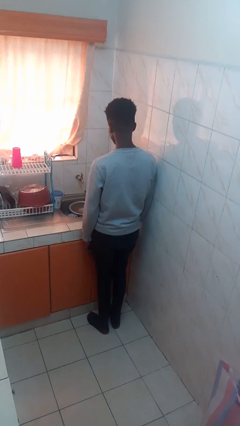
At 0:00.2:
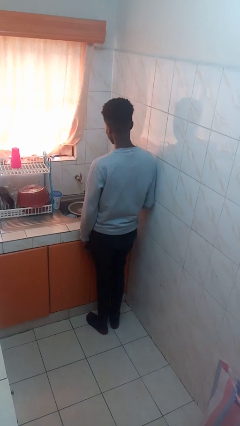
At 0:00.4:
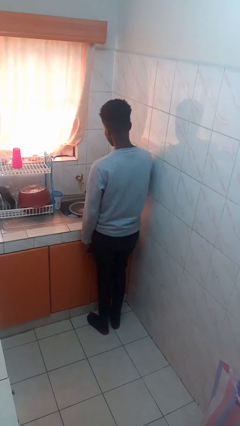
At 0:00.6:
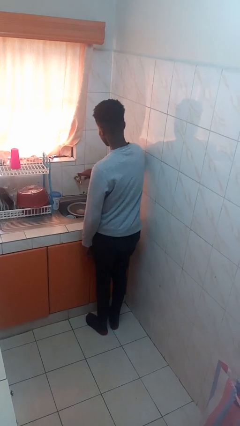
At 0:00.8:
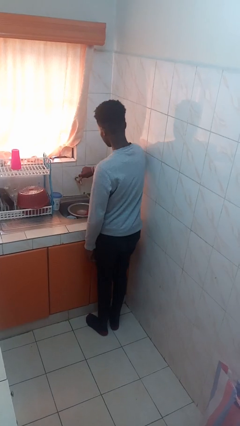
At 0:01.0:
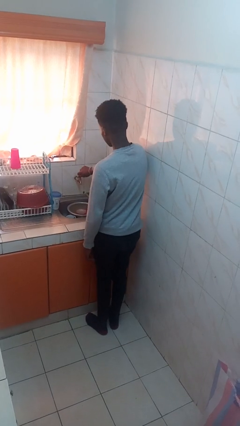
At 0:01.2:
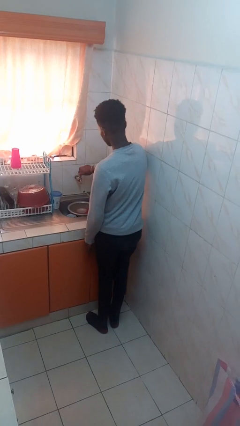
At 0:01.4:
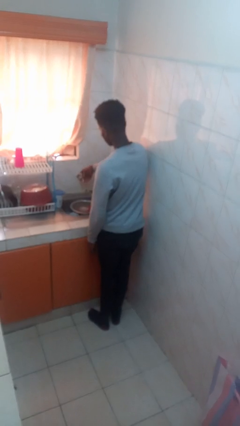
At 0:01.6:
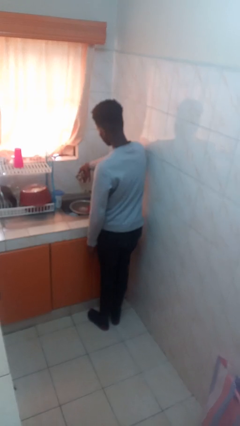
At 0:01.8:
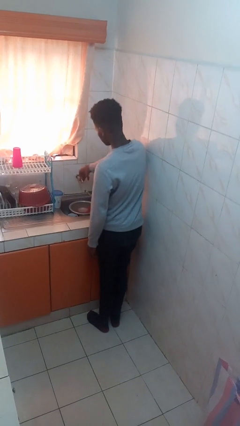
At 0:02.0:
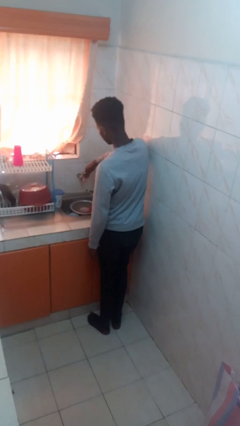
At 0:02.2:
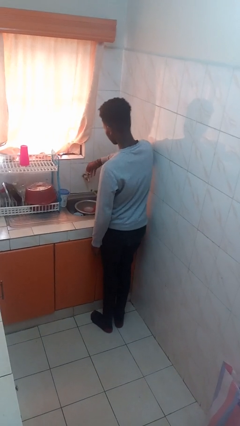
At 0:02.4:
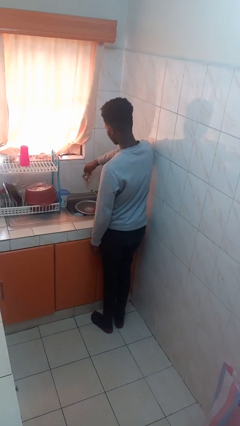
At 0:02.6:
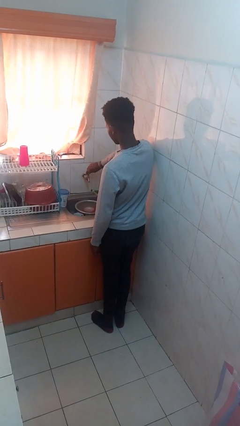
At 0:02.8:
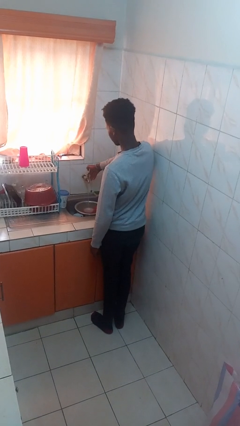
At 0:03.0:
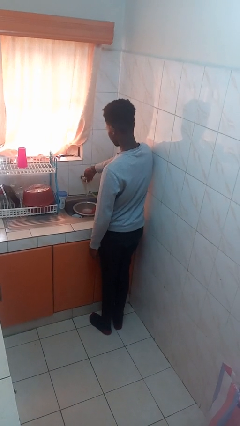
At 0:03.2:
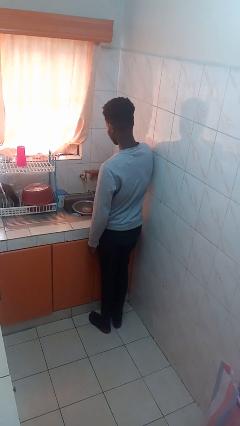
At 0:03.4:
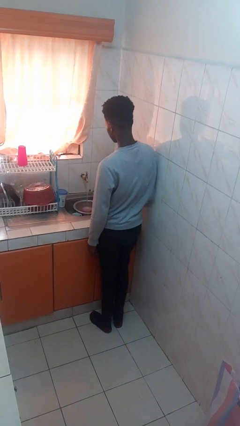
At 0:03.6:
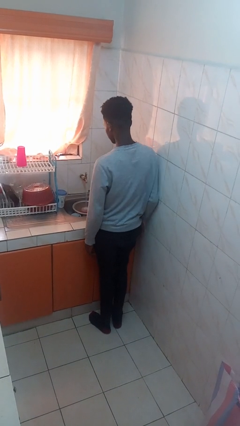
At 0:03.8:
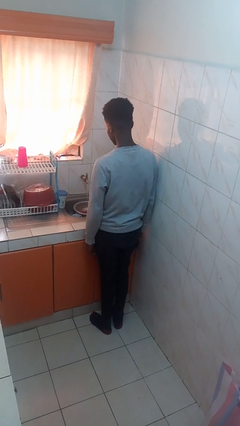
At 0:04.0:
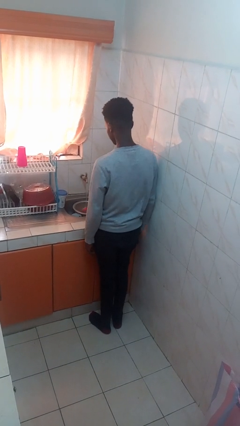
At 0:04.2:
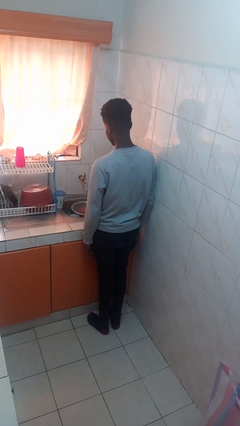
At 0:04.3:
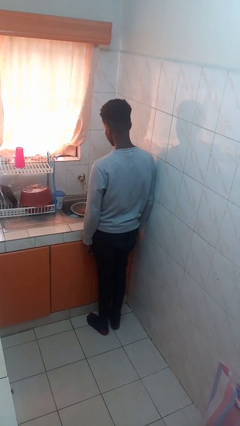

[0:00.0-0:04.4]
person turns on faucet

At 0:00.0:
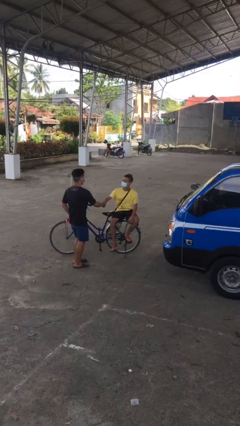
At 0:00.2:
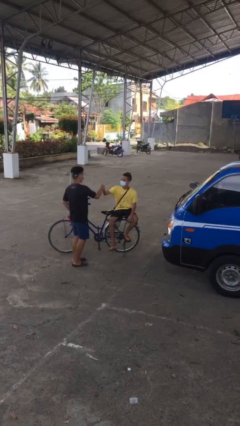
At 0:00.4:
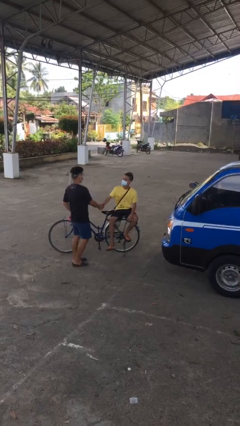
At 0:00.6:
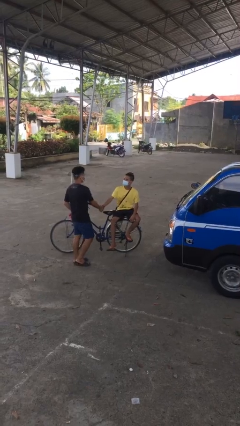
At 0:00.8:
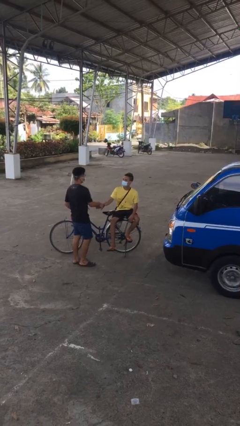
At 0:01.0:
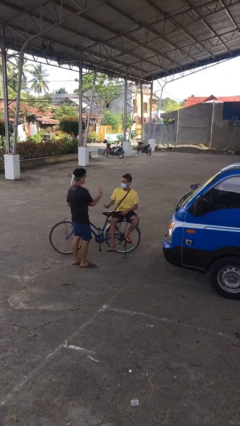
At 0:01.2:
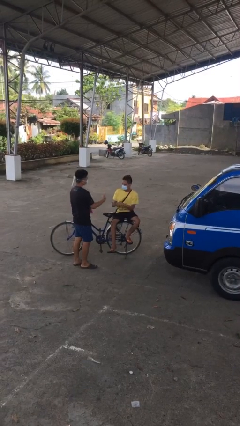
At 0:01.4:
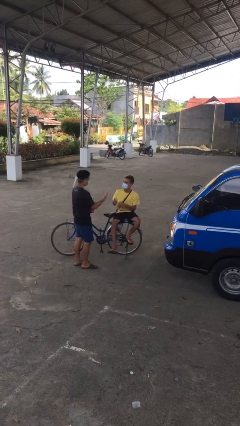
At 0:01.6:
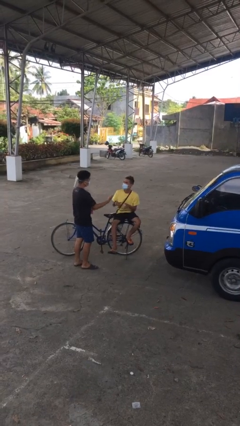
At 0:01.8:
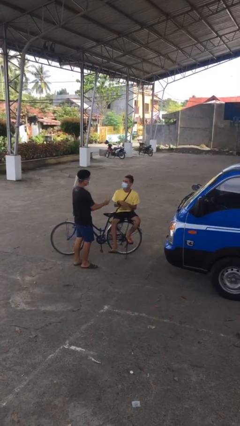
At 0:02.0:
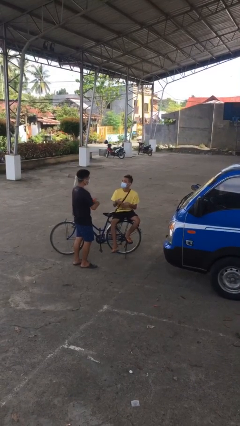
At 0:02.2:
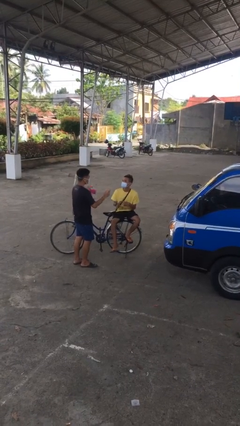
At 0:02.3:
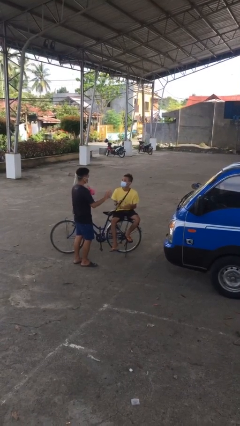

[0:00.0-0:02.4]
person shakes hand

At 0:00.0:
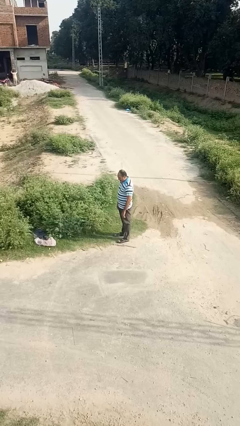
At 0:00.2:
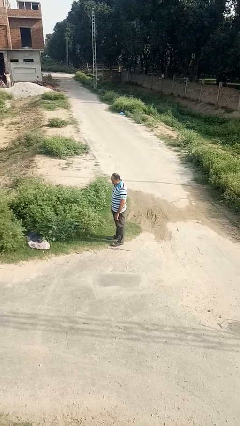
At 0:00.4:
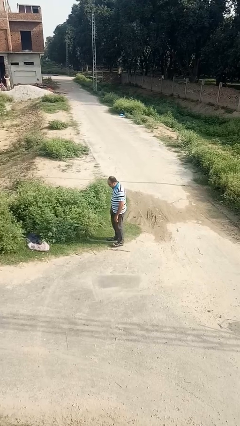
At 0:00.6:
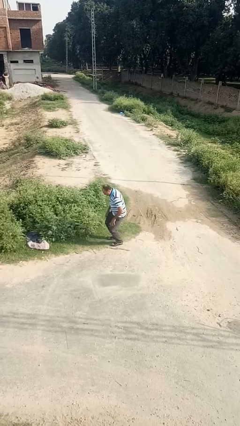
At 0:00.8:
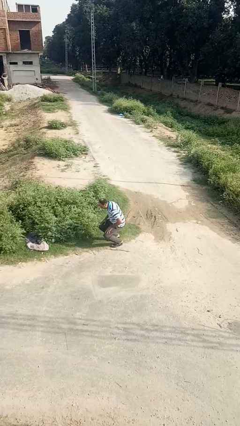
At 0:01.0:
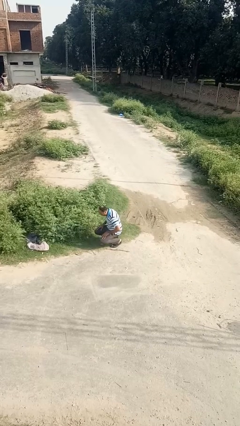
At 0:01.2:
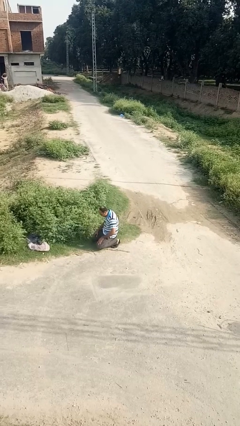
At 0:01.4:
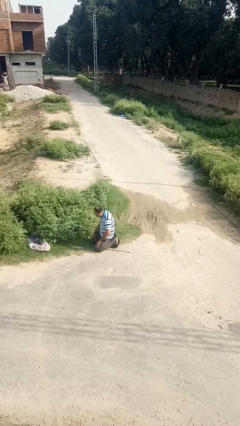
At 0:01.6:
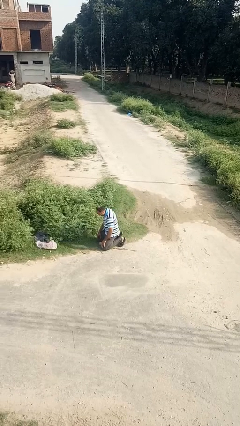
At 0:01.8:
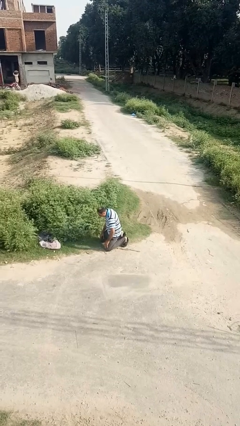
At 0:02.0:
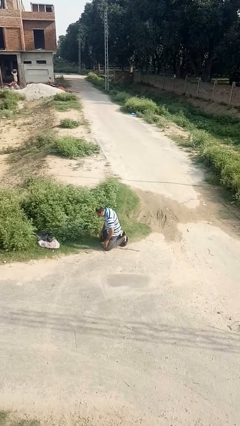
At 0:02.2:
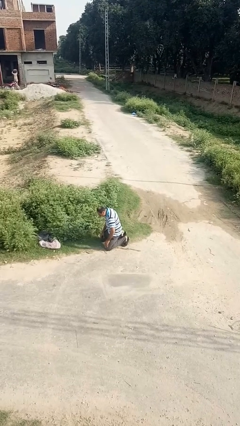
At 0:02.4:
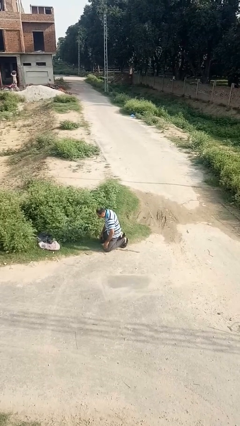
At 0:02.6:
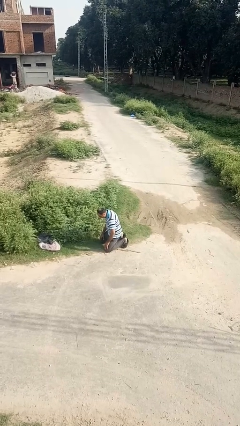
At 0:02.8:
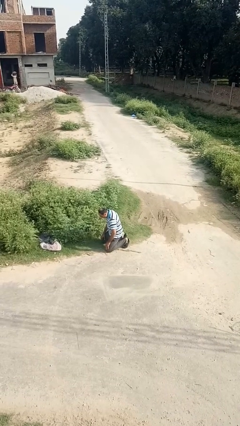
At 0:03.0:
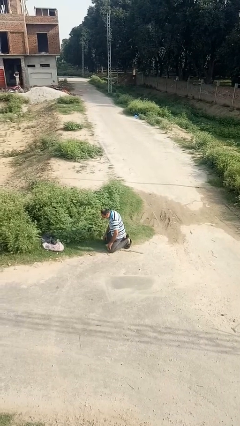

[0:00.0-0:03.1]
person kneels

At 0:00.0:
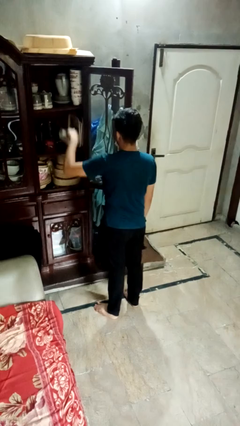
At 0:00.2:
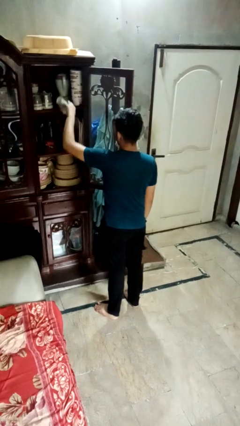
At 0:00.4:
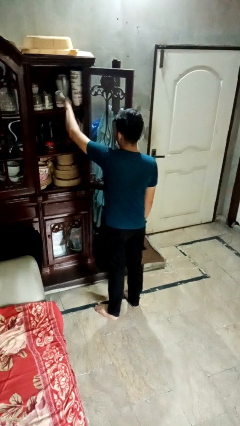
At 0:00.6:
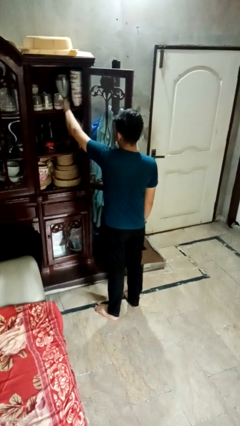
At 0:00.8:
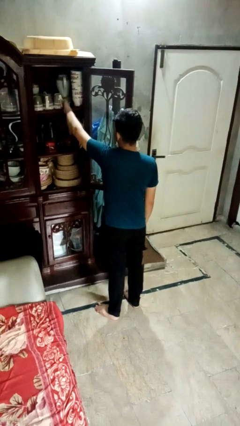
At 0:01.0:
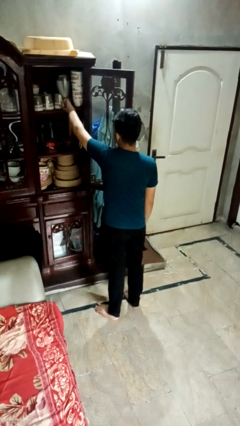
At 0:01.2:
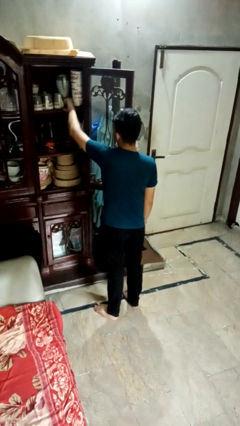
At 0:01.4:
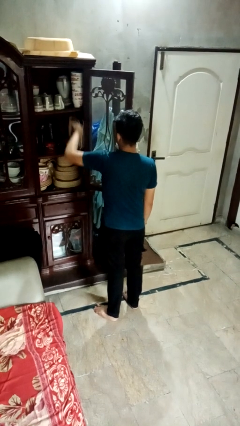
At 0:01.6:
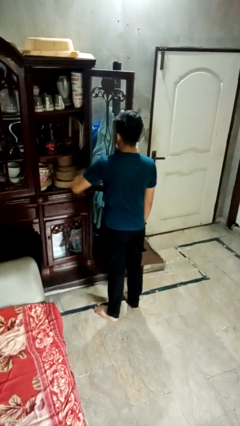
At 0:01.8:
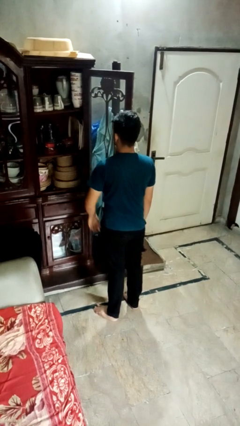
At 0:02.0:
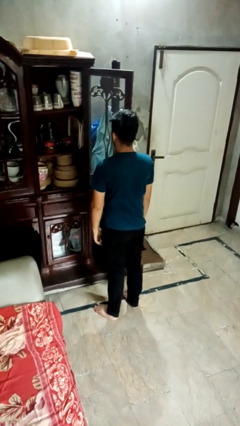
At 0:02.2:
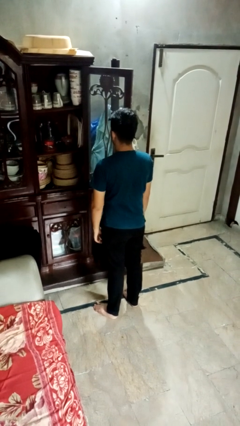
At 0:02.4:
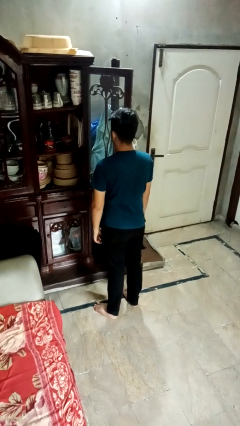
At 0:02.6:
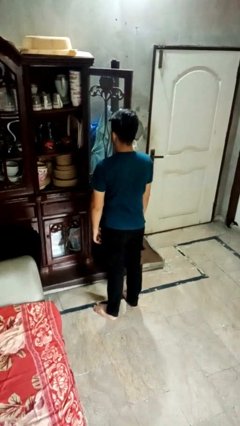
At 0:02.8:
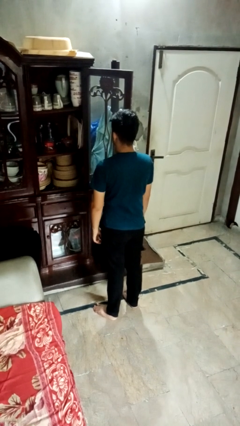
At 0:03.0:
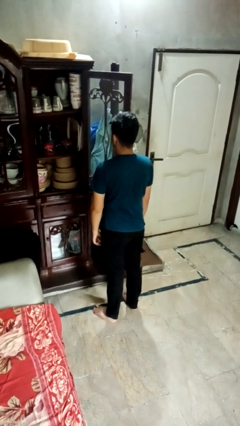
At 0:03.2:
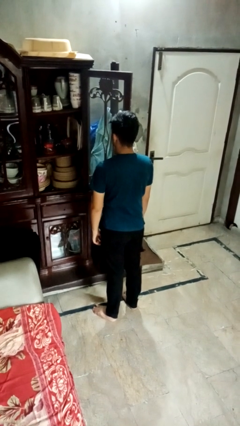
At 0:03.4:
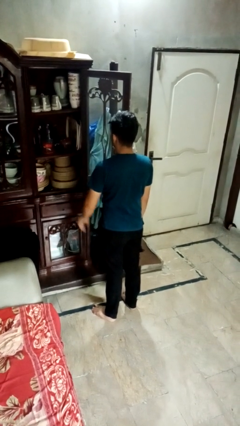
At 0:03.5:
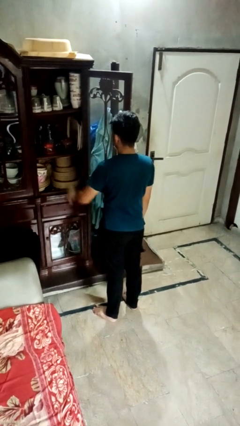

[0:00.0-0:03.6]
person puts object in cabinet

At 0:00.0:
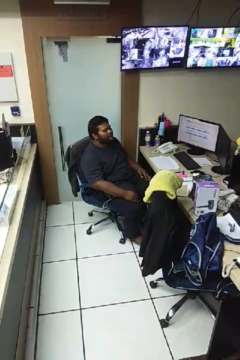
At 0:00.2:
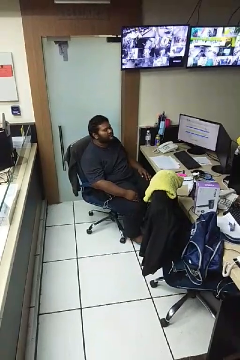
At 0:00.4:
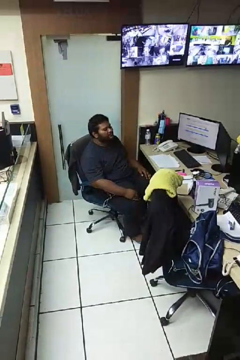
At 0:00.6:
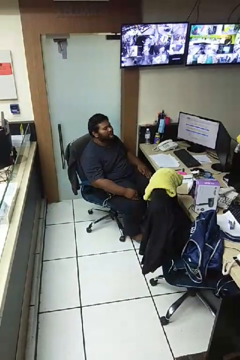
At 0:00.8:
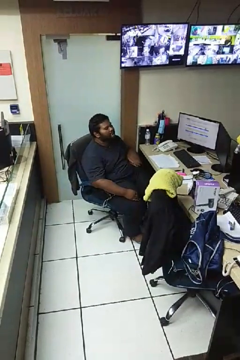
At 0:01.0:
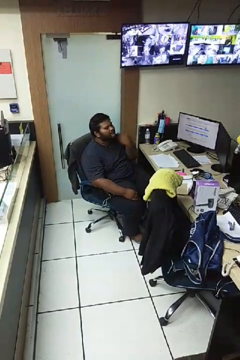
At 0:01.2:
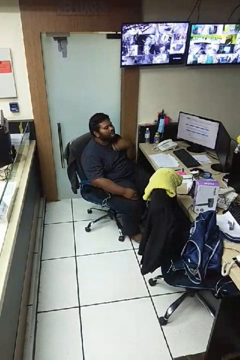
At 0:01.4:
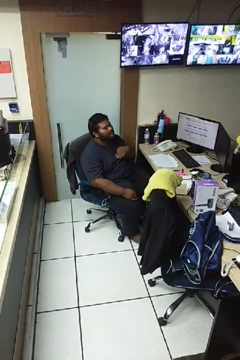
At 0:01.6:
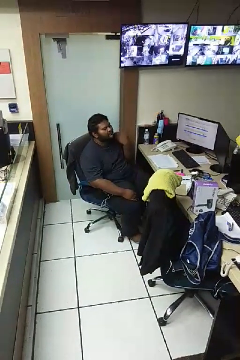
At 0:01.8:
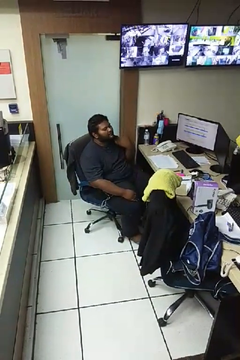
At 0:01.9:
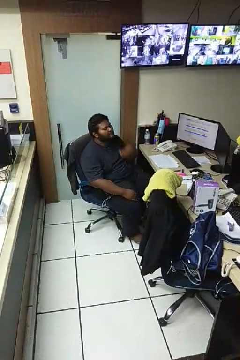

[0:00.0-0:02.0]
person gestures cut

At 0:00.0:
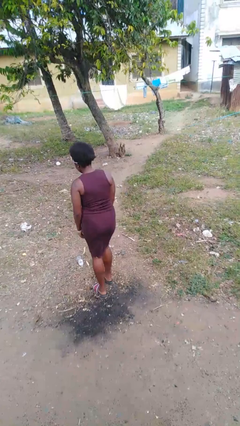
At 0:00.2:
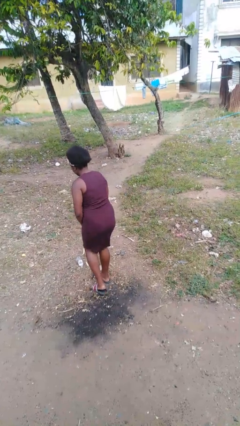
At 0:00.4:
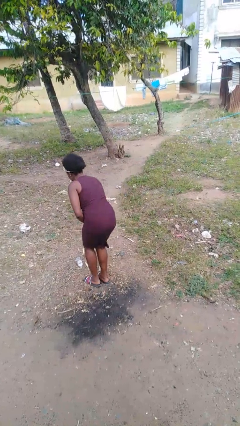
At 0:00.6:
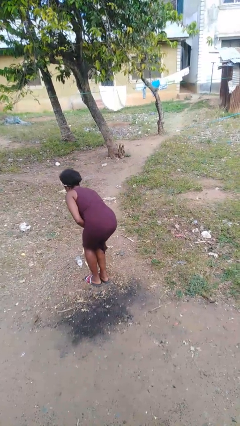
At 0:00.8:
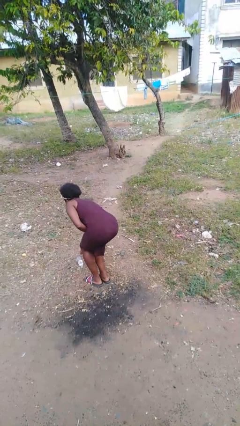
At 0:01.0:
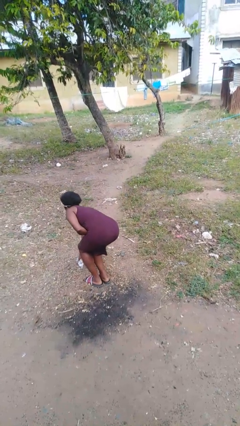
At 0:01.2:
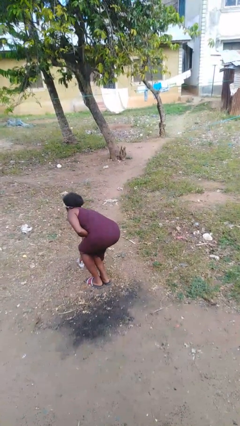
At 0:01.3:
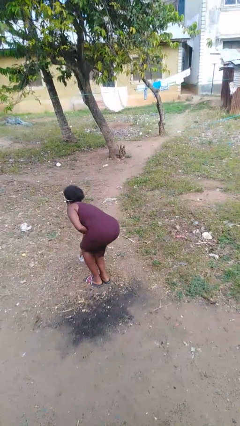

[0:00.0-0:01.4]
person picks up object from floor

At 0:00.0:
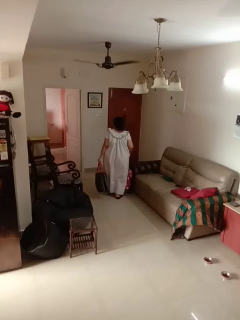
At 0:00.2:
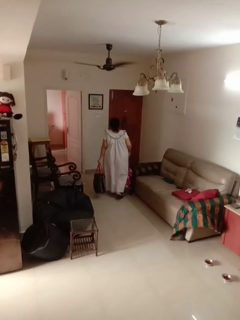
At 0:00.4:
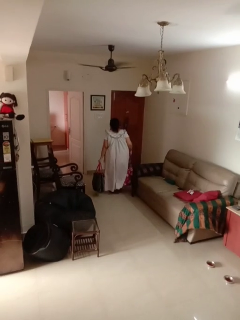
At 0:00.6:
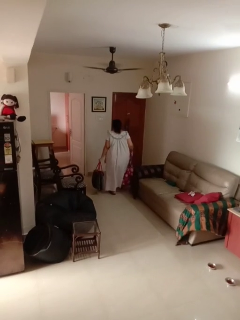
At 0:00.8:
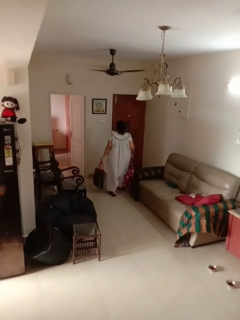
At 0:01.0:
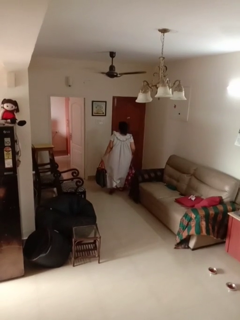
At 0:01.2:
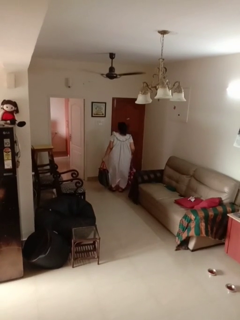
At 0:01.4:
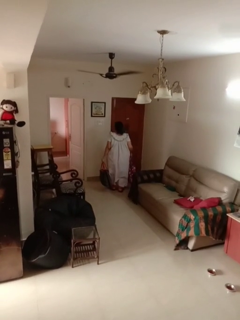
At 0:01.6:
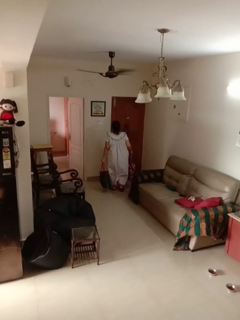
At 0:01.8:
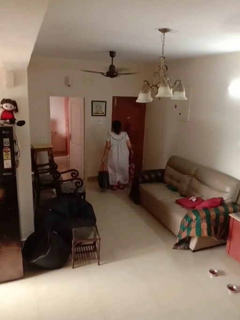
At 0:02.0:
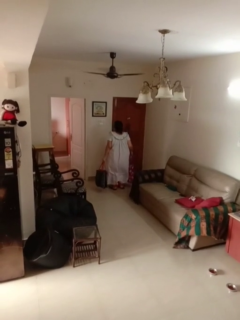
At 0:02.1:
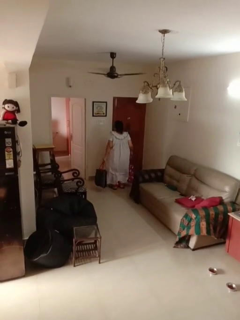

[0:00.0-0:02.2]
person carries groceries
